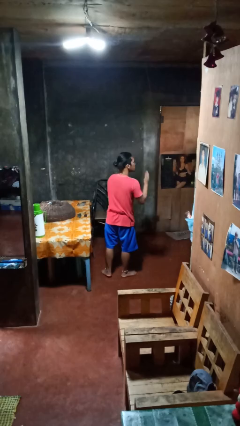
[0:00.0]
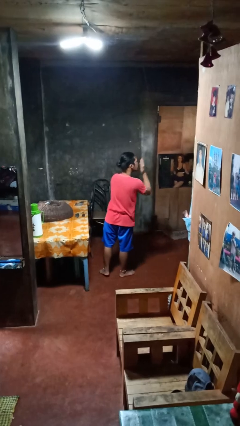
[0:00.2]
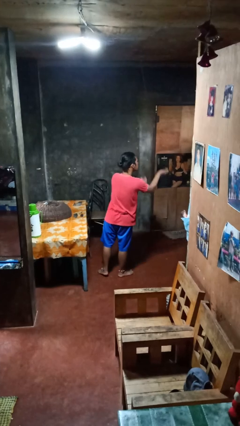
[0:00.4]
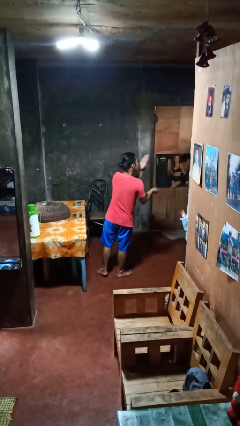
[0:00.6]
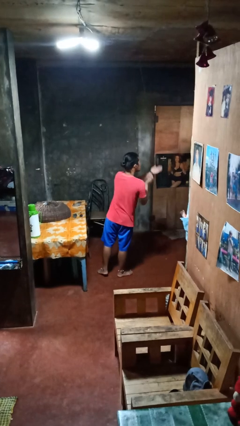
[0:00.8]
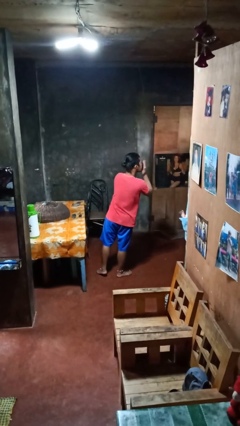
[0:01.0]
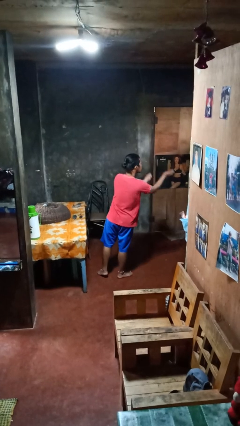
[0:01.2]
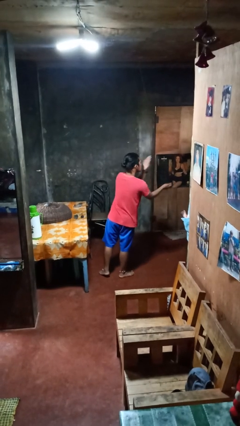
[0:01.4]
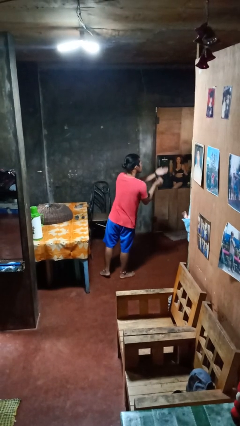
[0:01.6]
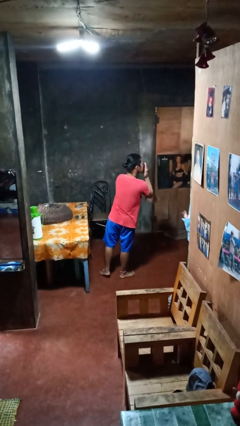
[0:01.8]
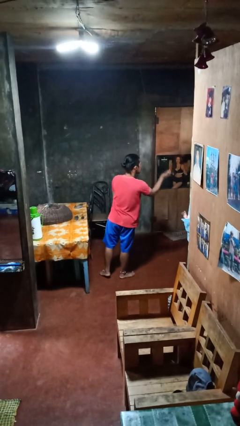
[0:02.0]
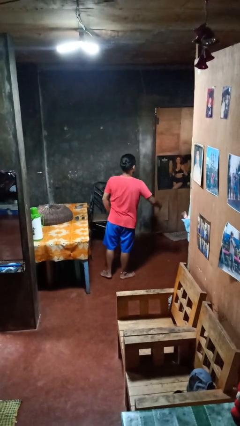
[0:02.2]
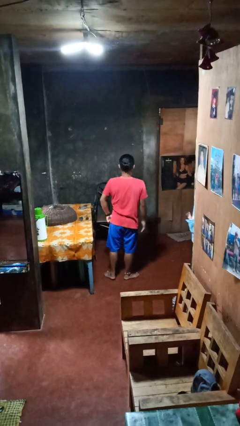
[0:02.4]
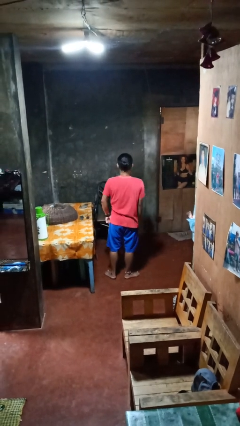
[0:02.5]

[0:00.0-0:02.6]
person gestures blow kiss

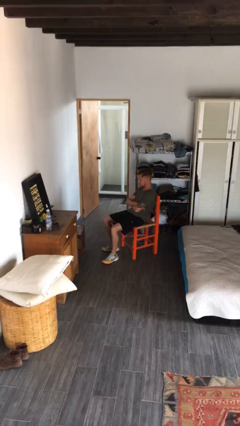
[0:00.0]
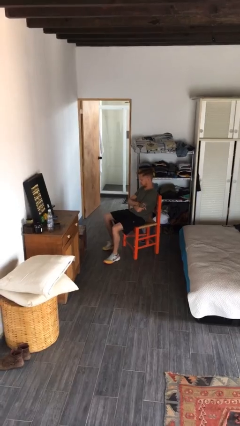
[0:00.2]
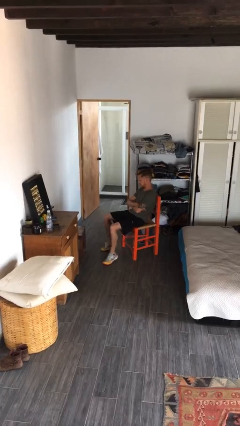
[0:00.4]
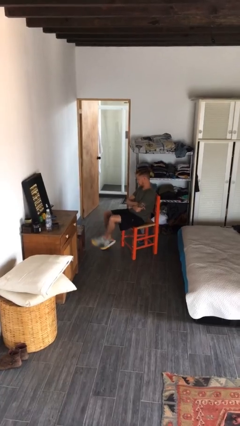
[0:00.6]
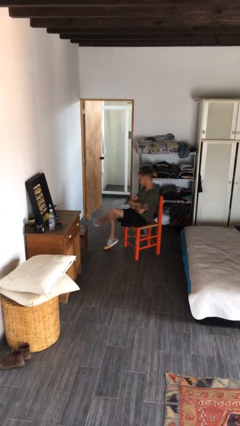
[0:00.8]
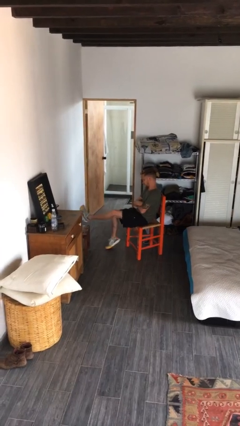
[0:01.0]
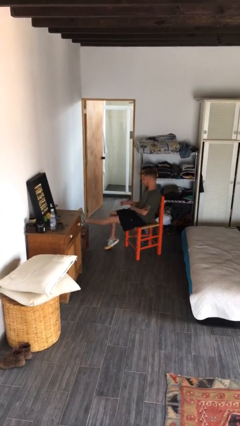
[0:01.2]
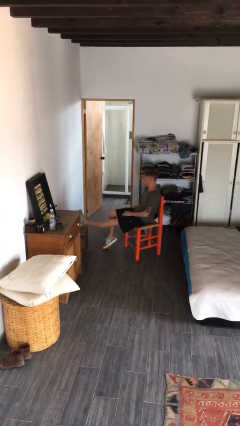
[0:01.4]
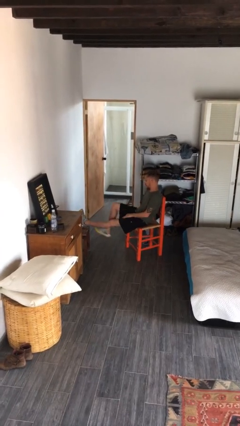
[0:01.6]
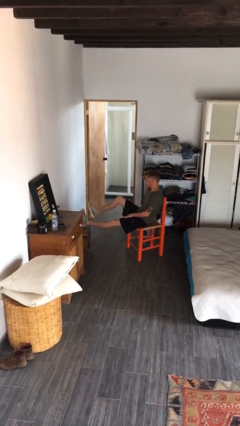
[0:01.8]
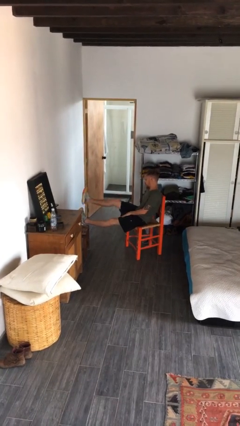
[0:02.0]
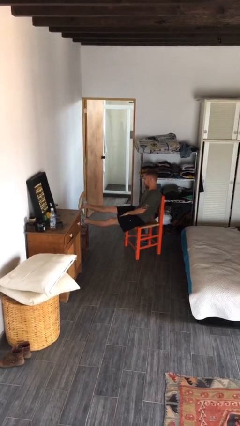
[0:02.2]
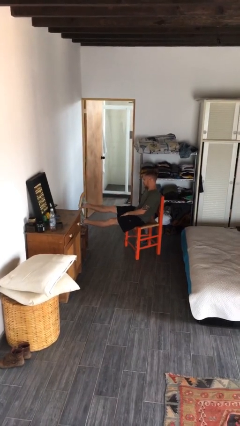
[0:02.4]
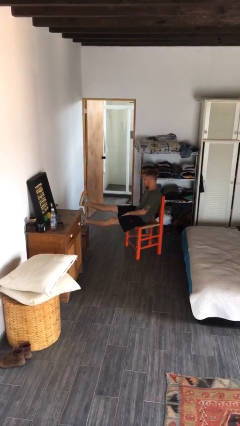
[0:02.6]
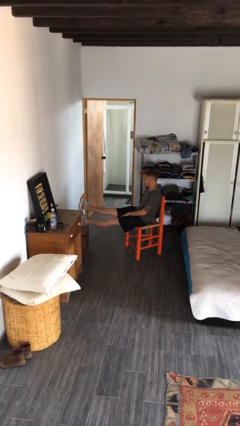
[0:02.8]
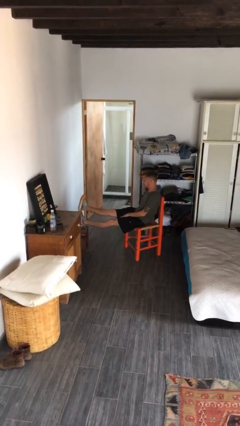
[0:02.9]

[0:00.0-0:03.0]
person puts feet up

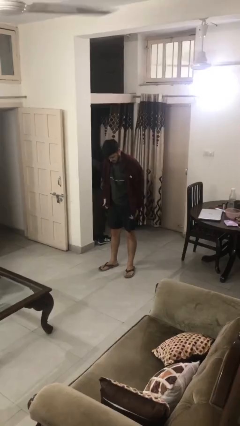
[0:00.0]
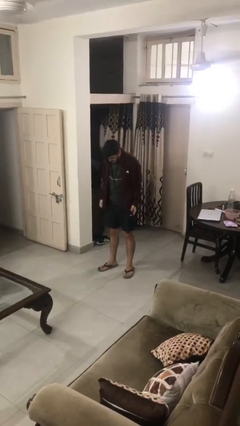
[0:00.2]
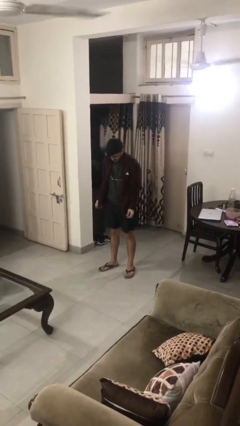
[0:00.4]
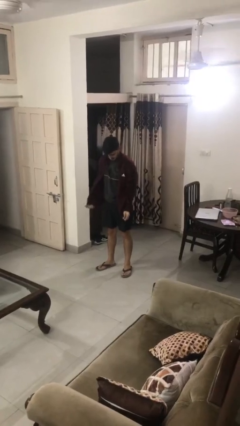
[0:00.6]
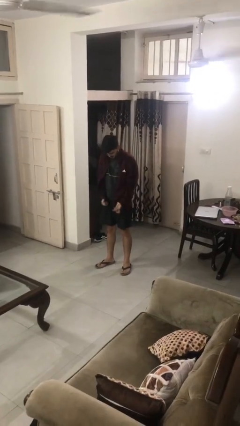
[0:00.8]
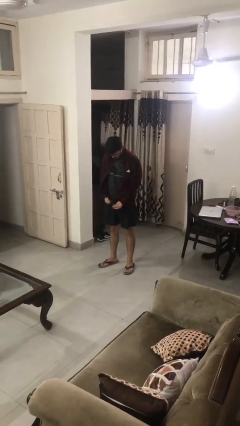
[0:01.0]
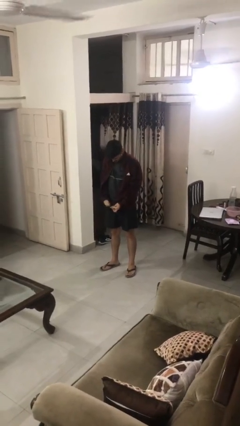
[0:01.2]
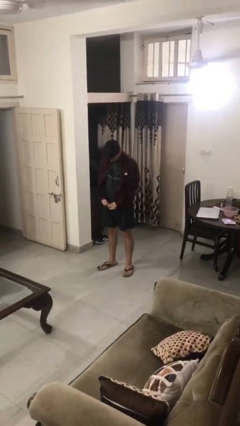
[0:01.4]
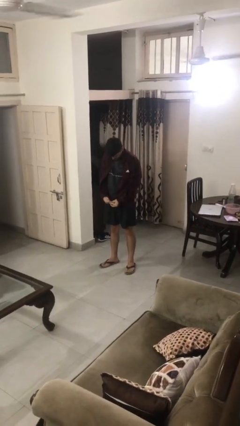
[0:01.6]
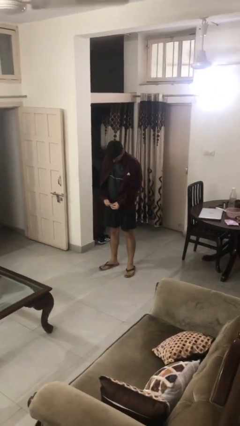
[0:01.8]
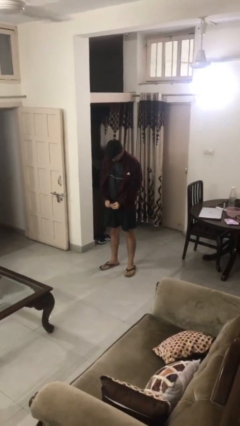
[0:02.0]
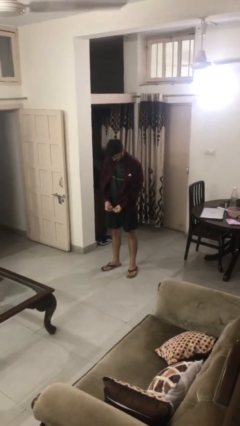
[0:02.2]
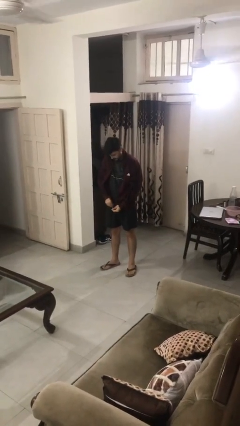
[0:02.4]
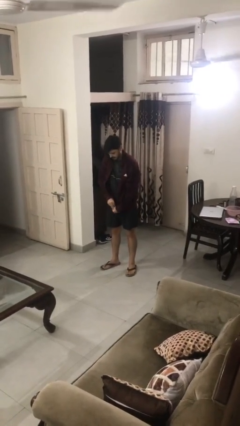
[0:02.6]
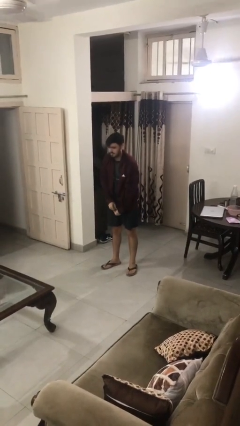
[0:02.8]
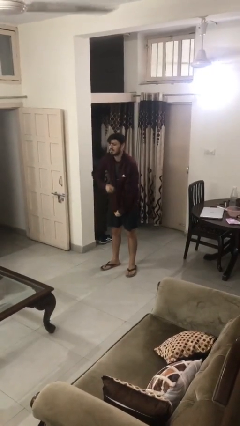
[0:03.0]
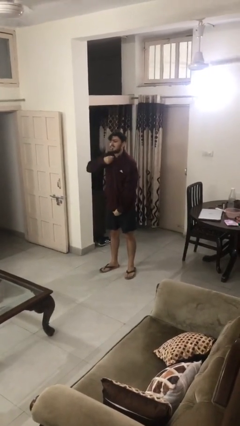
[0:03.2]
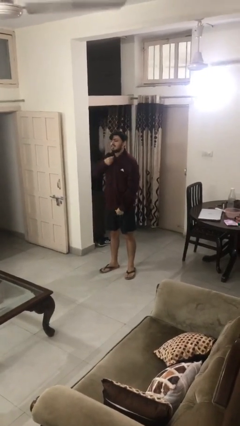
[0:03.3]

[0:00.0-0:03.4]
person zips up jacket

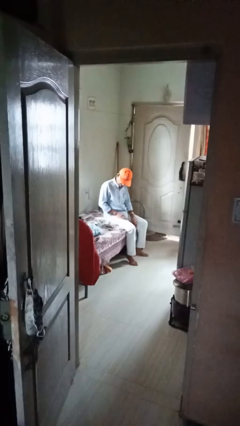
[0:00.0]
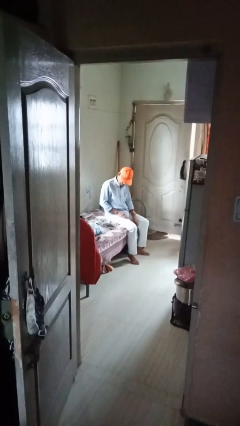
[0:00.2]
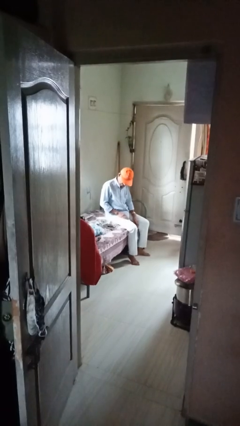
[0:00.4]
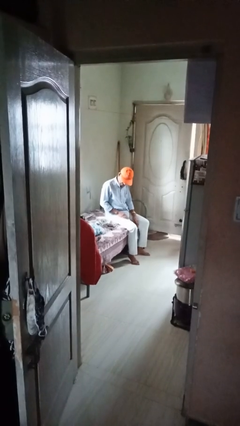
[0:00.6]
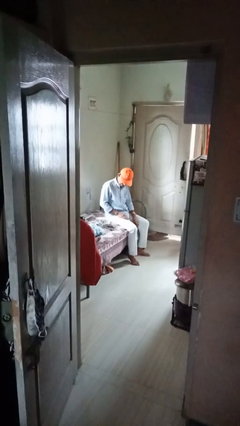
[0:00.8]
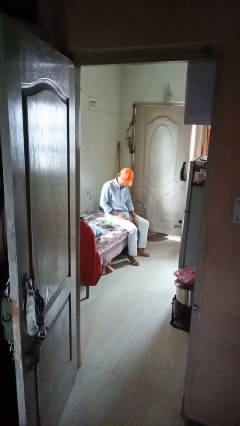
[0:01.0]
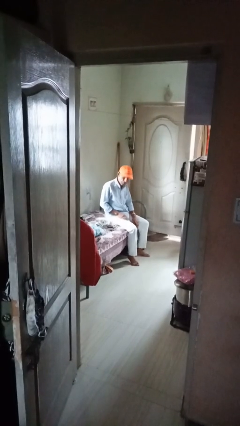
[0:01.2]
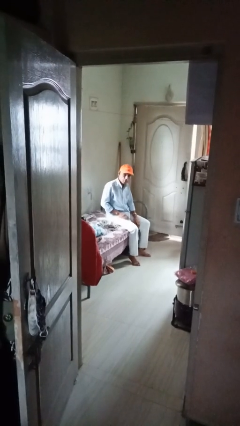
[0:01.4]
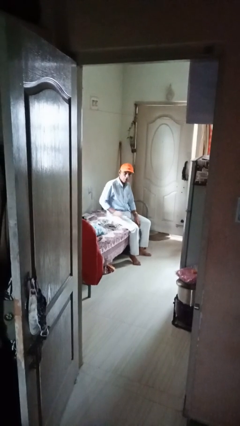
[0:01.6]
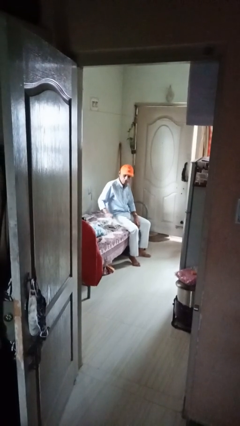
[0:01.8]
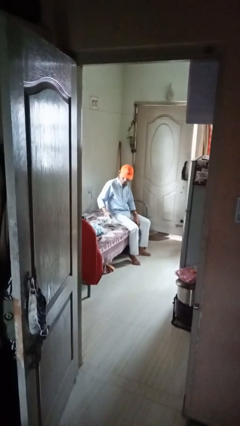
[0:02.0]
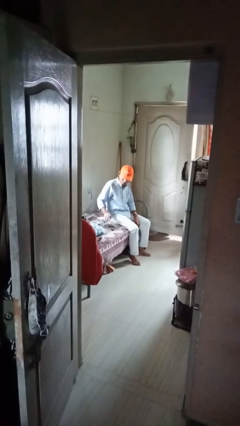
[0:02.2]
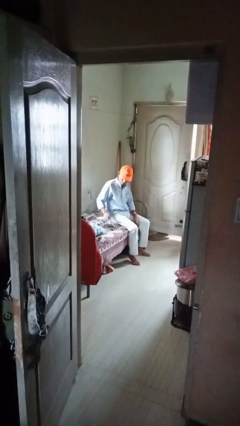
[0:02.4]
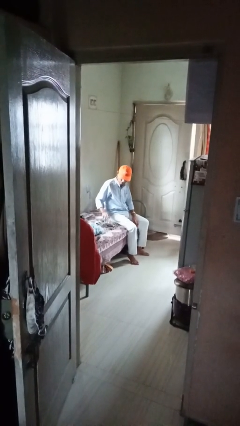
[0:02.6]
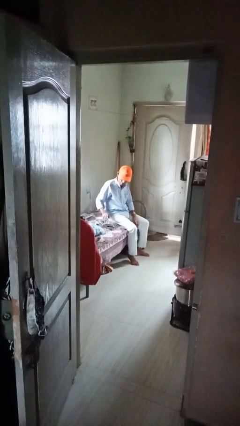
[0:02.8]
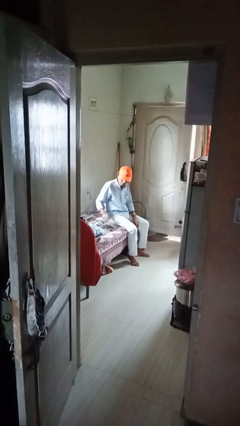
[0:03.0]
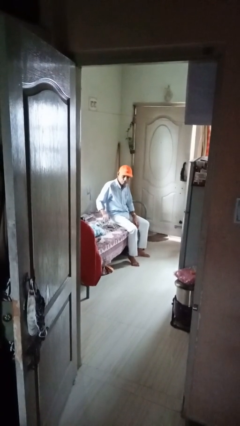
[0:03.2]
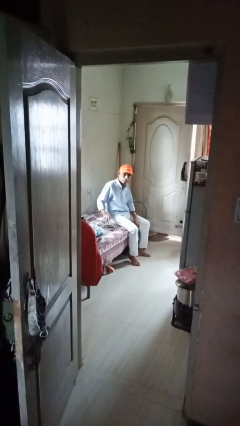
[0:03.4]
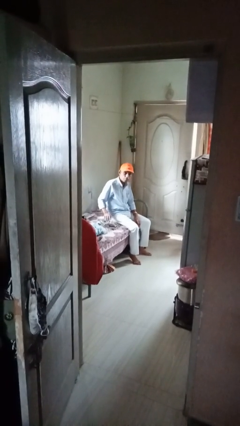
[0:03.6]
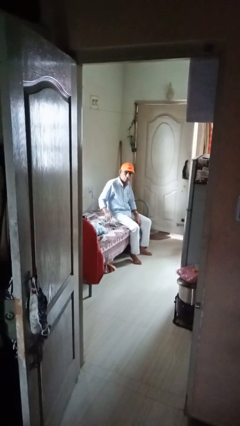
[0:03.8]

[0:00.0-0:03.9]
person taps object with finger

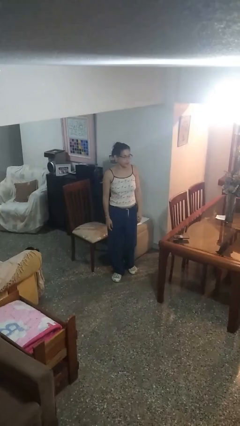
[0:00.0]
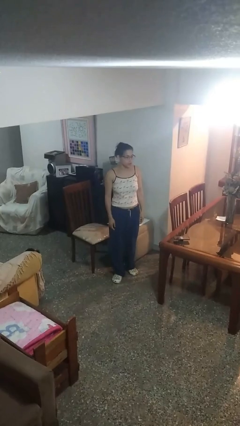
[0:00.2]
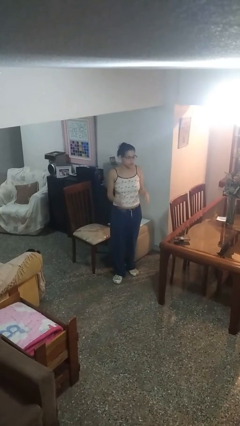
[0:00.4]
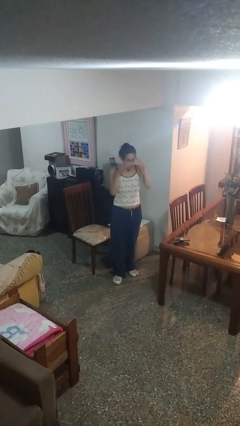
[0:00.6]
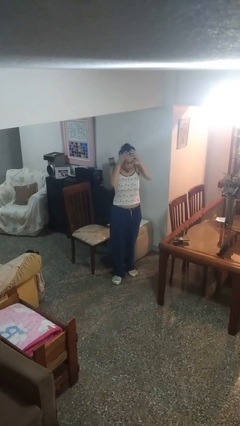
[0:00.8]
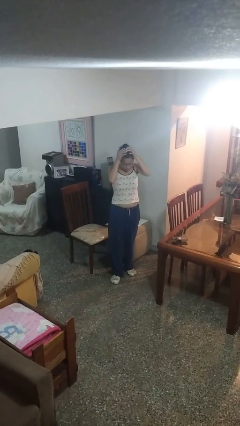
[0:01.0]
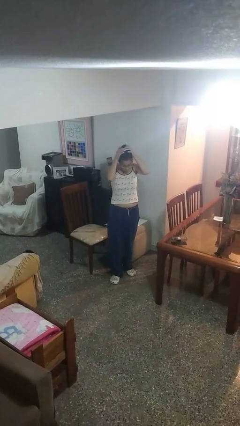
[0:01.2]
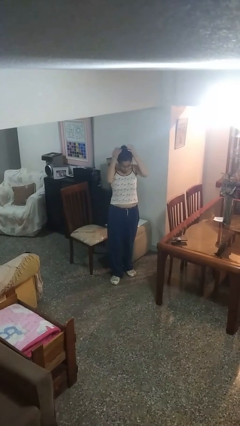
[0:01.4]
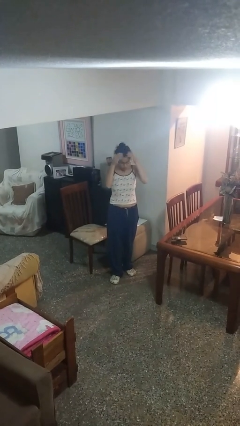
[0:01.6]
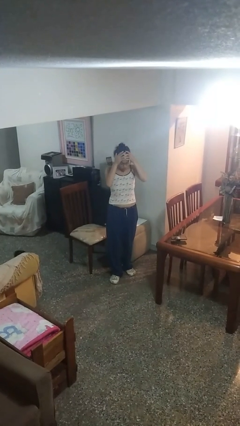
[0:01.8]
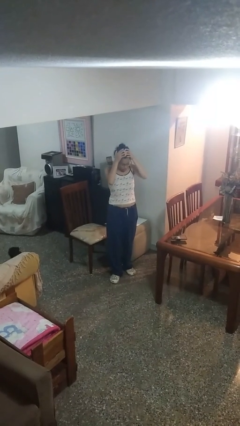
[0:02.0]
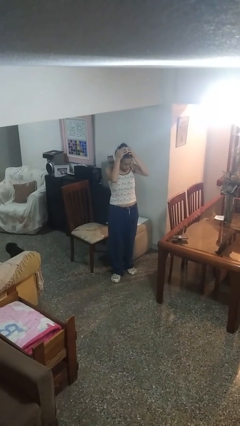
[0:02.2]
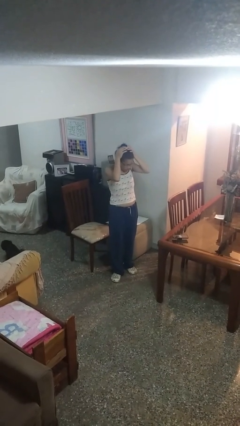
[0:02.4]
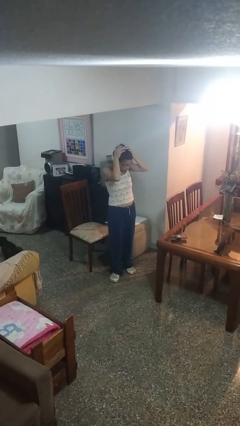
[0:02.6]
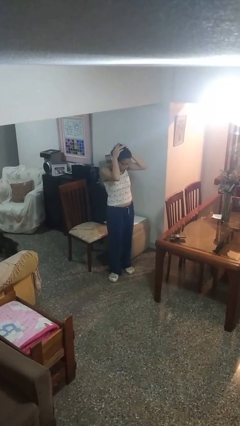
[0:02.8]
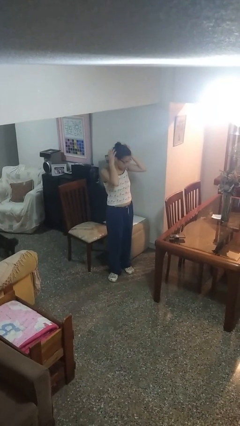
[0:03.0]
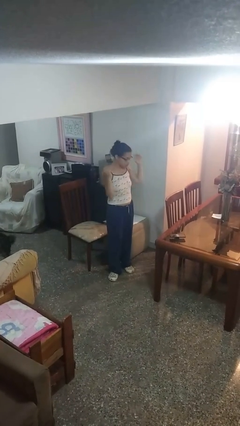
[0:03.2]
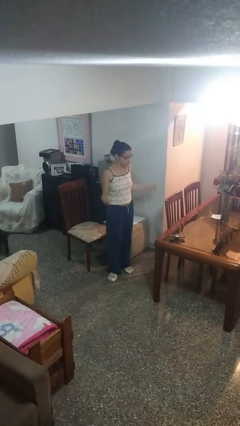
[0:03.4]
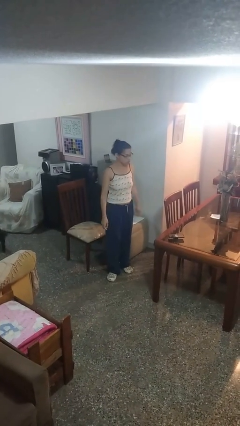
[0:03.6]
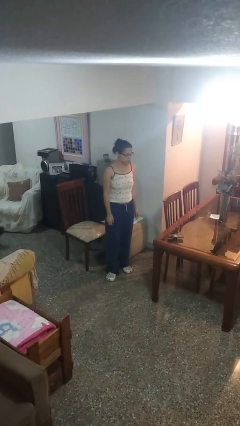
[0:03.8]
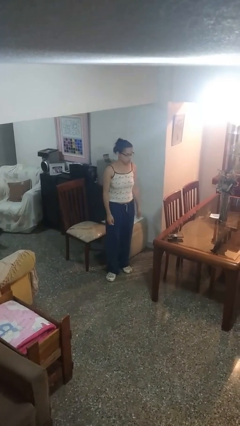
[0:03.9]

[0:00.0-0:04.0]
person pats head

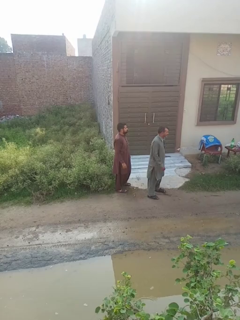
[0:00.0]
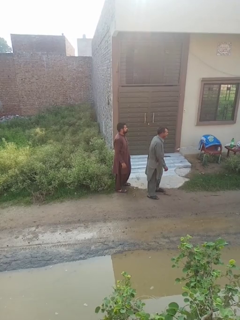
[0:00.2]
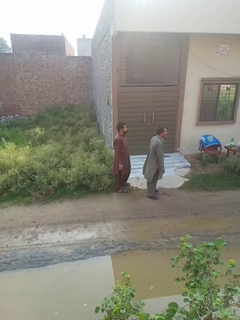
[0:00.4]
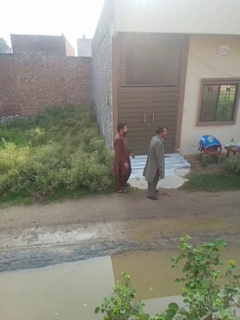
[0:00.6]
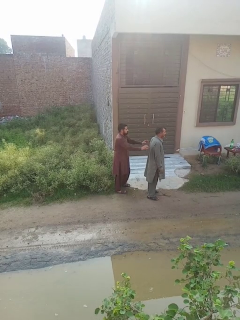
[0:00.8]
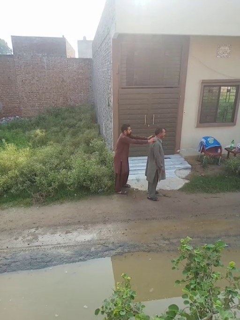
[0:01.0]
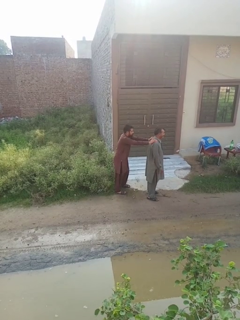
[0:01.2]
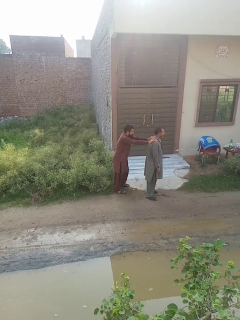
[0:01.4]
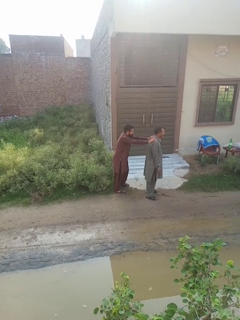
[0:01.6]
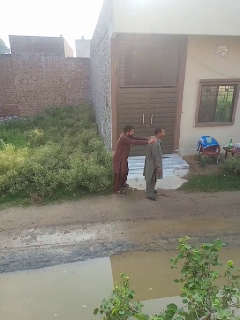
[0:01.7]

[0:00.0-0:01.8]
person grabs person by shoulder
